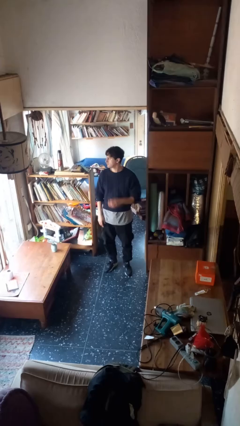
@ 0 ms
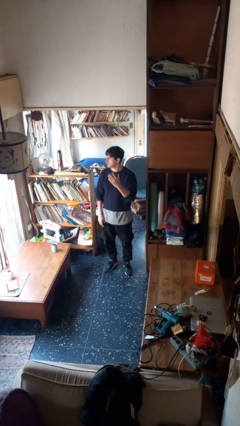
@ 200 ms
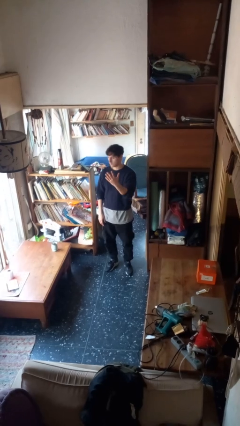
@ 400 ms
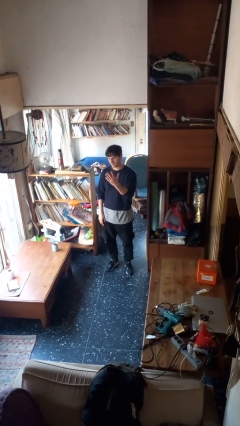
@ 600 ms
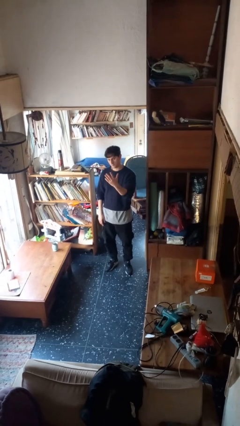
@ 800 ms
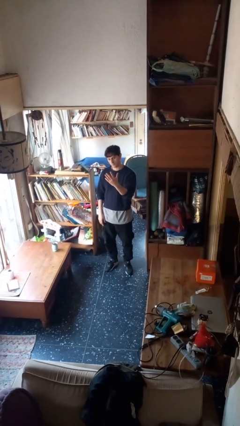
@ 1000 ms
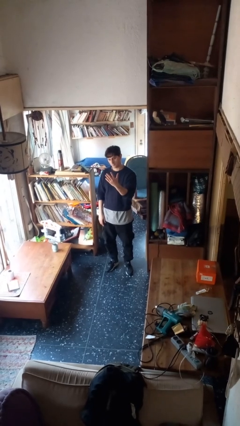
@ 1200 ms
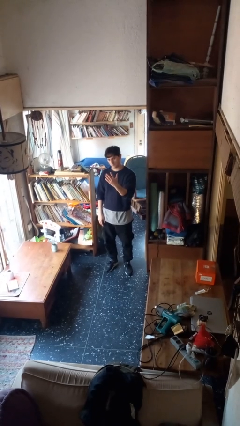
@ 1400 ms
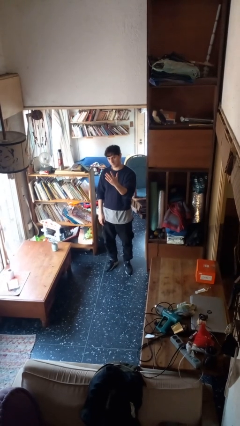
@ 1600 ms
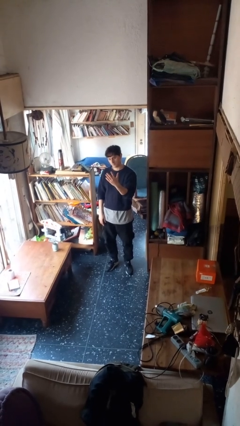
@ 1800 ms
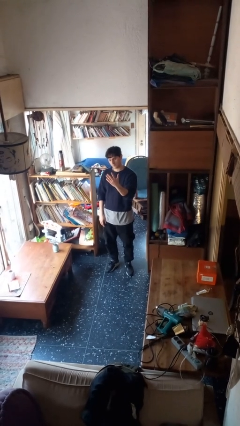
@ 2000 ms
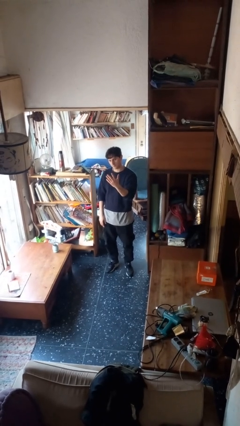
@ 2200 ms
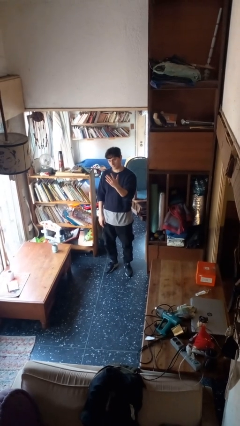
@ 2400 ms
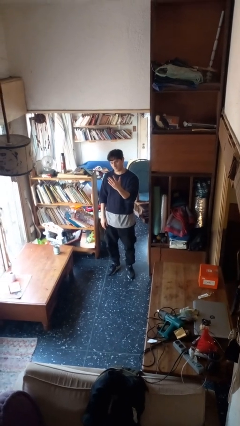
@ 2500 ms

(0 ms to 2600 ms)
person gestures number five

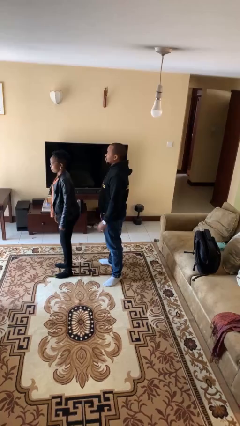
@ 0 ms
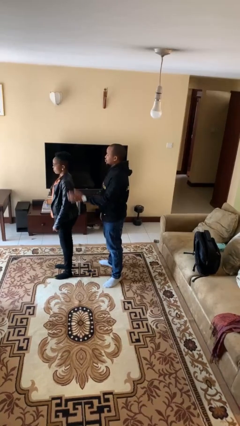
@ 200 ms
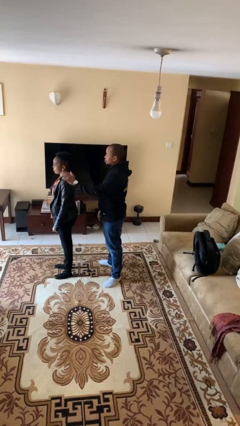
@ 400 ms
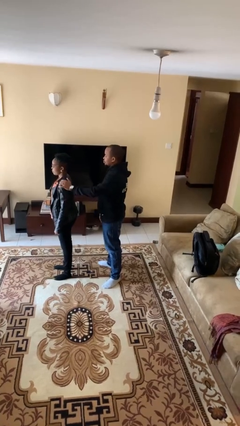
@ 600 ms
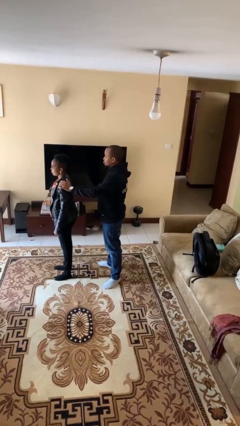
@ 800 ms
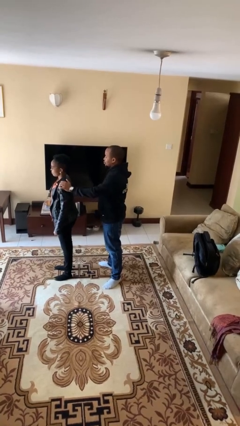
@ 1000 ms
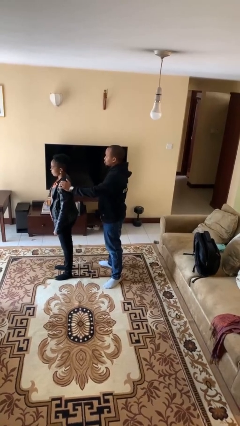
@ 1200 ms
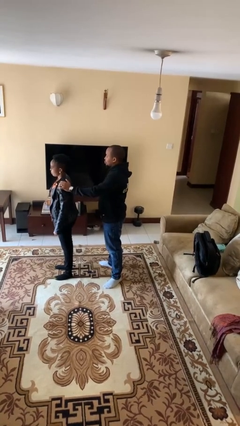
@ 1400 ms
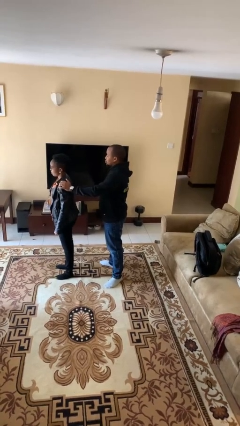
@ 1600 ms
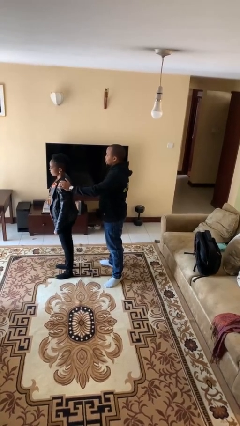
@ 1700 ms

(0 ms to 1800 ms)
person grabs person by shoulder

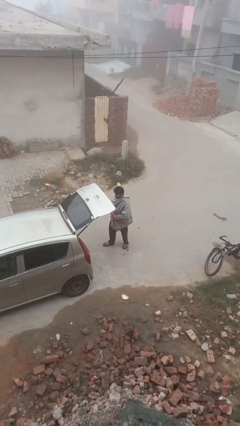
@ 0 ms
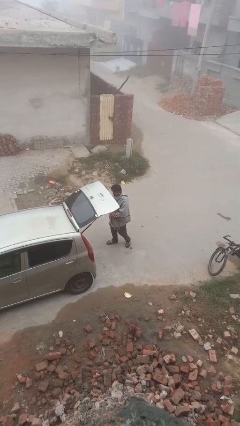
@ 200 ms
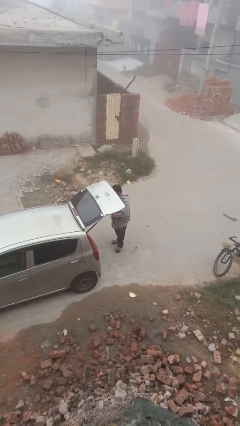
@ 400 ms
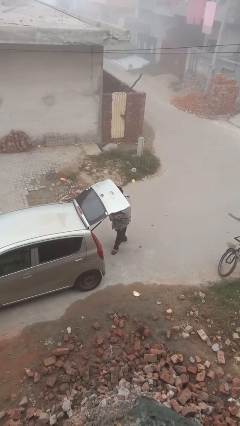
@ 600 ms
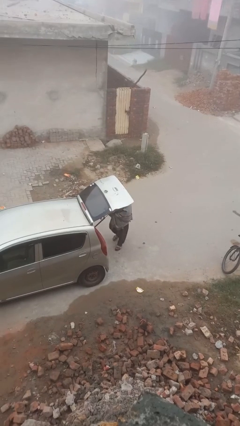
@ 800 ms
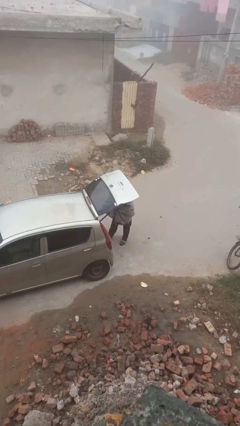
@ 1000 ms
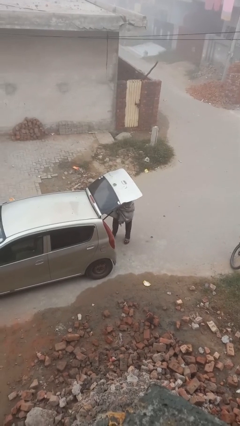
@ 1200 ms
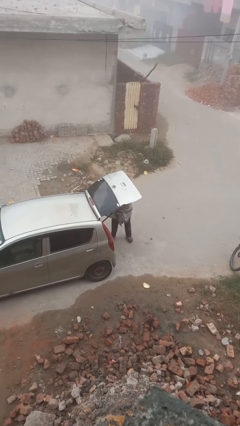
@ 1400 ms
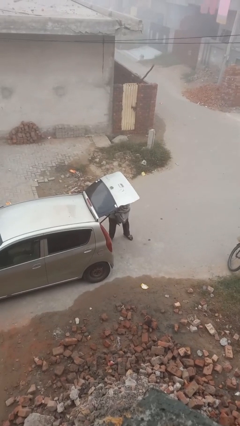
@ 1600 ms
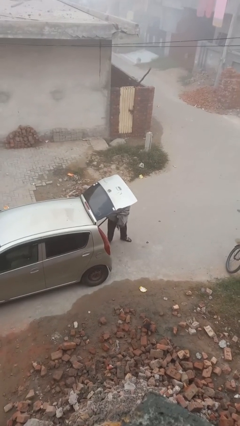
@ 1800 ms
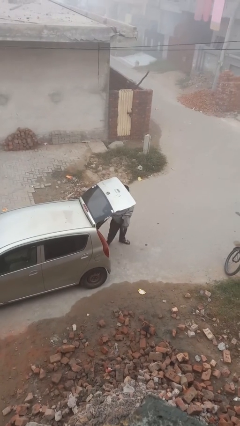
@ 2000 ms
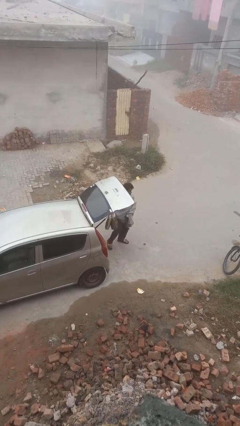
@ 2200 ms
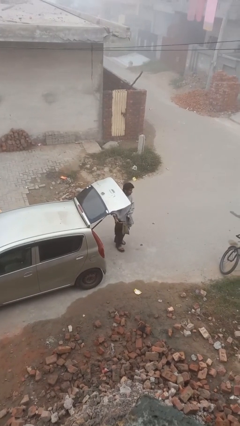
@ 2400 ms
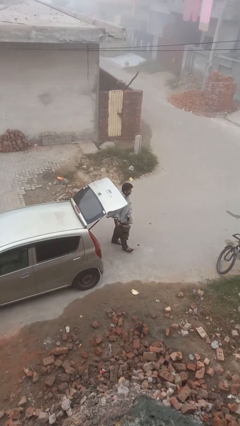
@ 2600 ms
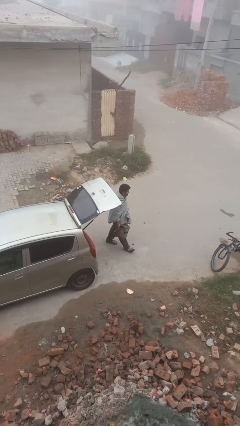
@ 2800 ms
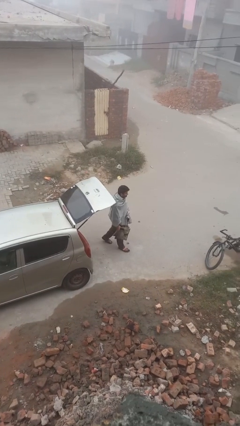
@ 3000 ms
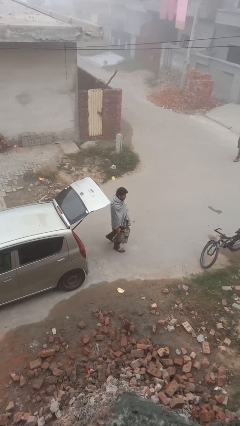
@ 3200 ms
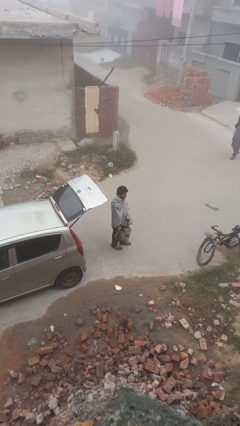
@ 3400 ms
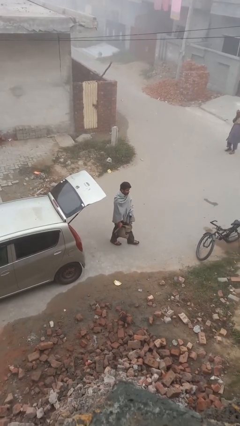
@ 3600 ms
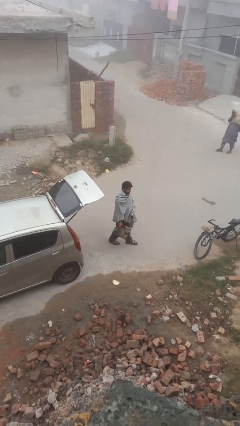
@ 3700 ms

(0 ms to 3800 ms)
person unloads car

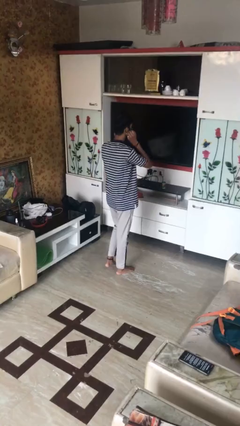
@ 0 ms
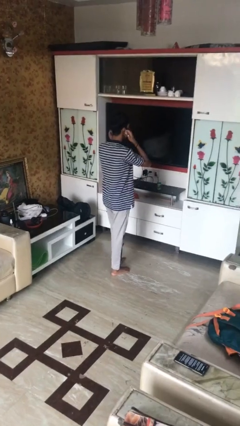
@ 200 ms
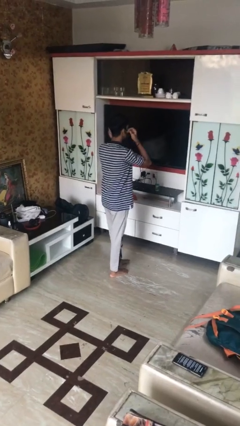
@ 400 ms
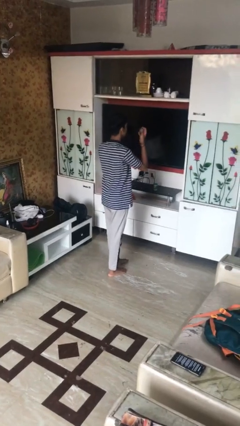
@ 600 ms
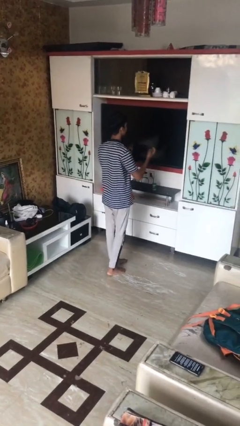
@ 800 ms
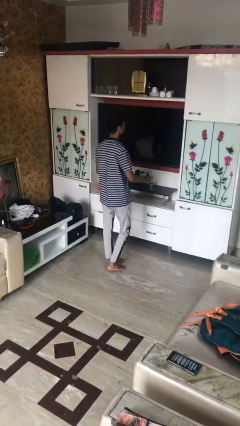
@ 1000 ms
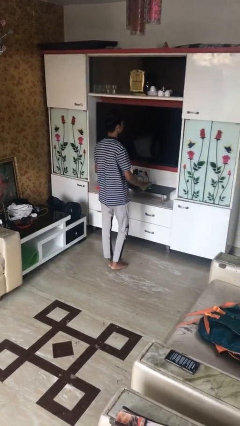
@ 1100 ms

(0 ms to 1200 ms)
person takes off facemask

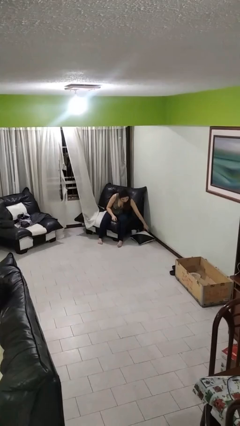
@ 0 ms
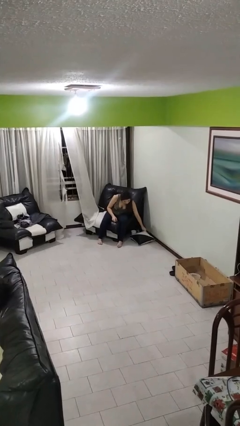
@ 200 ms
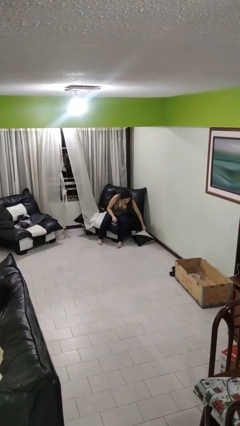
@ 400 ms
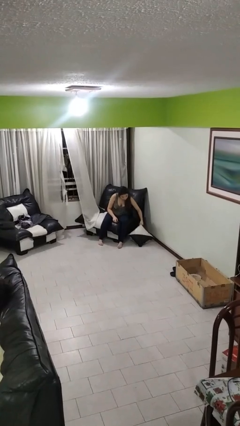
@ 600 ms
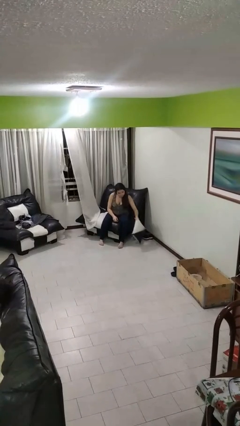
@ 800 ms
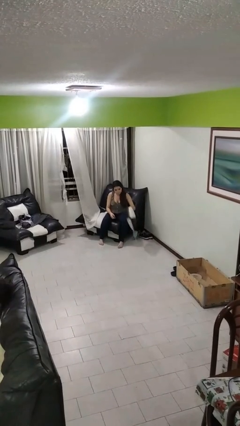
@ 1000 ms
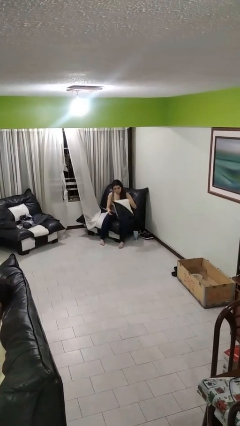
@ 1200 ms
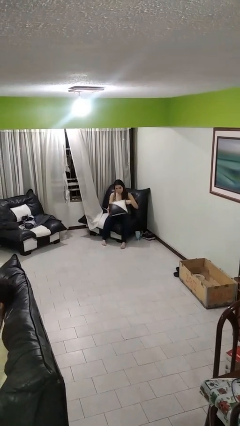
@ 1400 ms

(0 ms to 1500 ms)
person picks up object from floor

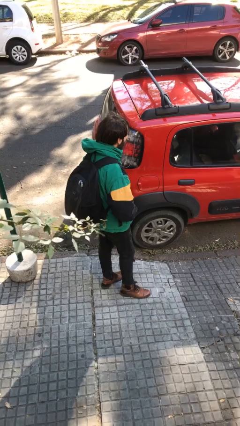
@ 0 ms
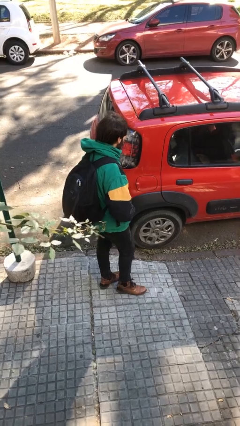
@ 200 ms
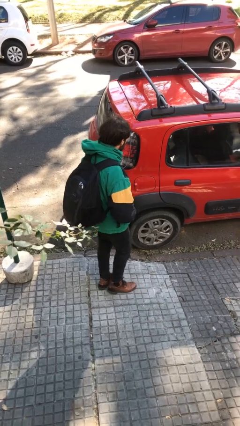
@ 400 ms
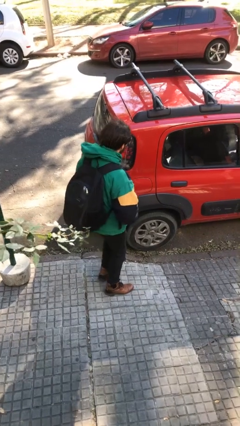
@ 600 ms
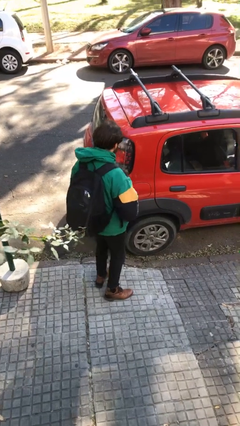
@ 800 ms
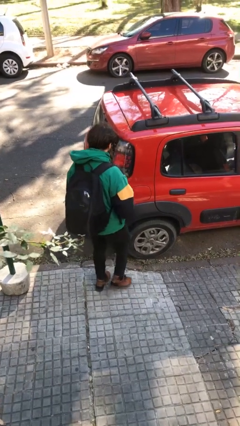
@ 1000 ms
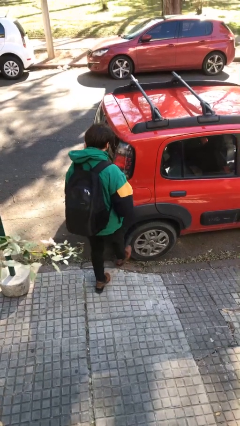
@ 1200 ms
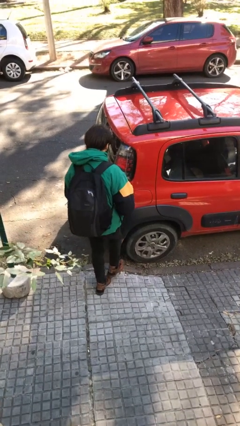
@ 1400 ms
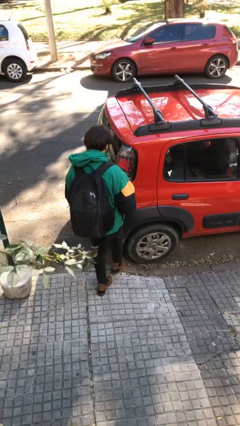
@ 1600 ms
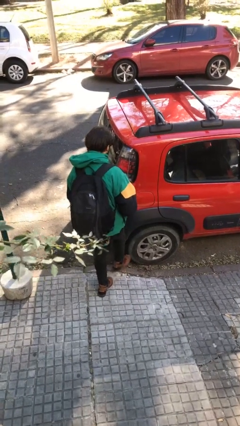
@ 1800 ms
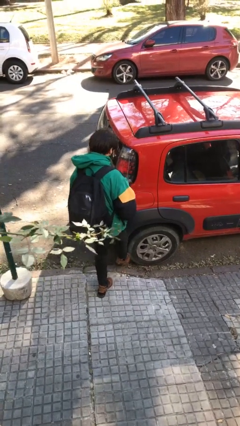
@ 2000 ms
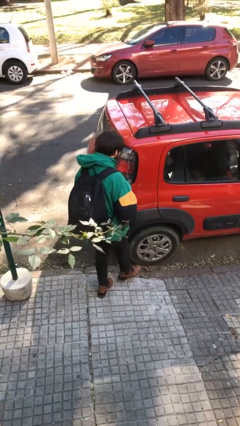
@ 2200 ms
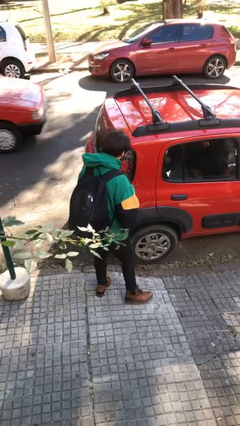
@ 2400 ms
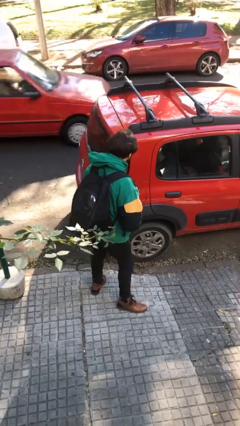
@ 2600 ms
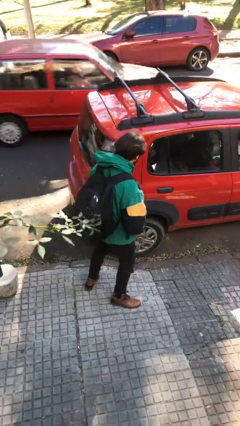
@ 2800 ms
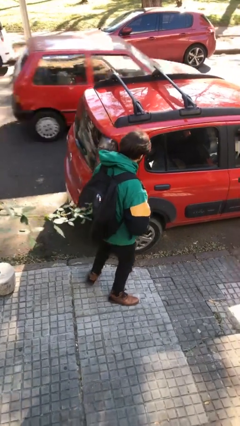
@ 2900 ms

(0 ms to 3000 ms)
person kicks car tires

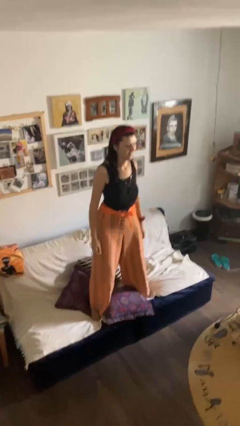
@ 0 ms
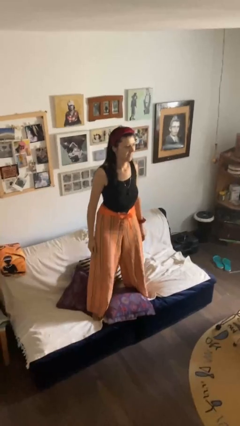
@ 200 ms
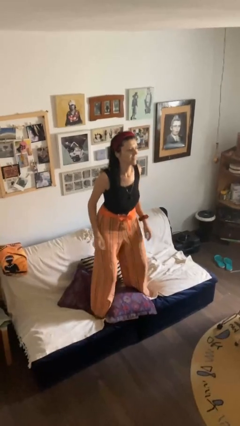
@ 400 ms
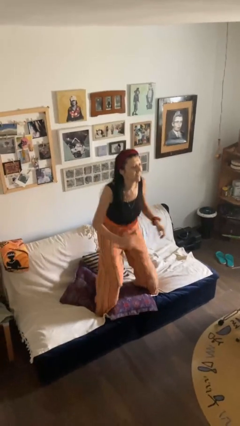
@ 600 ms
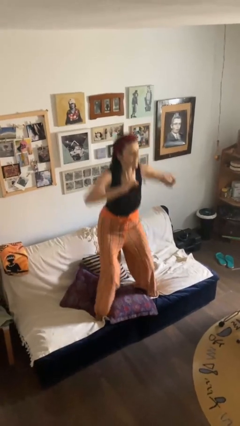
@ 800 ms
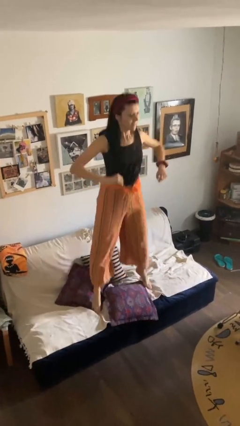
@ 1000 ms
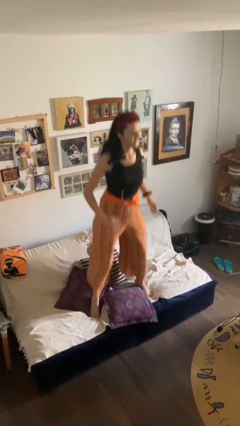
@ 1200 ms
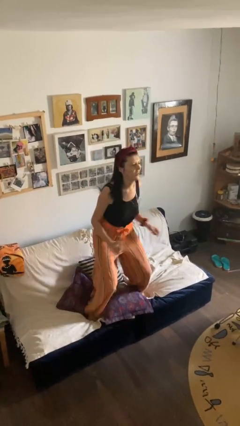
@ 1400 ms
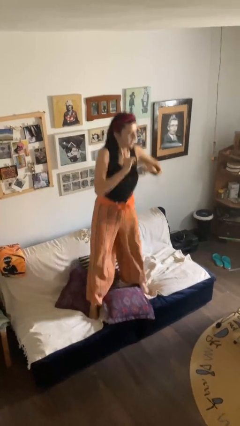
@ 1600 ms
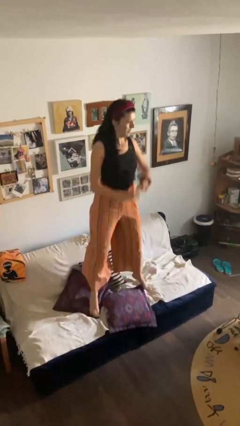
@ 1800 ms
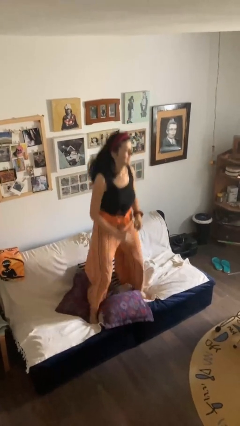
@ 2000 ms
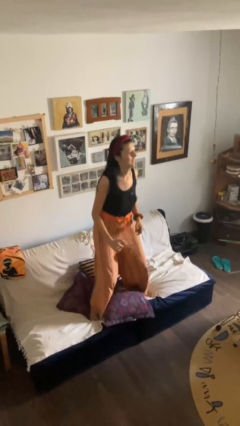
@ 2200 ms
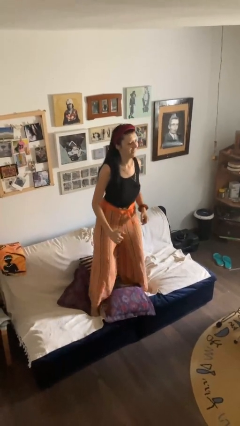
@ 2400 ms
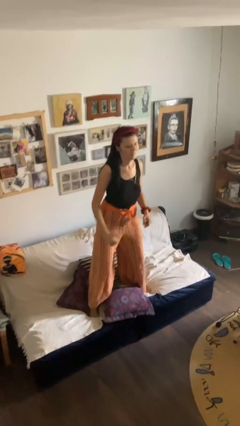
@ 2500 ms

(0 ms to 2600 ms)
person jumps on couch

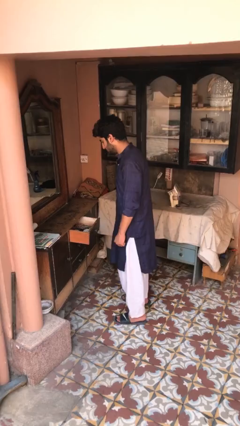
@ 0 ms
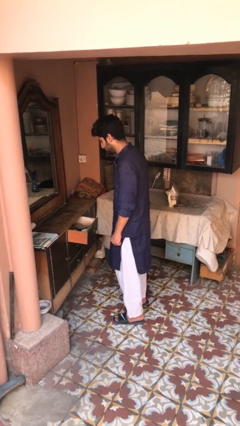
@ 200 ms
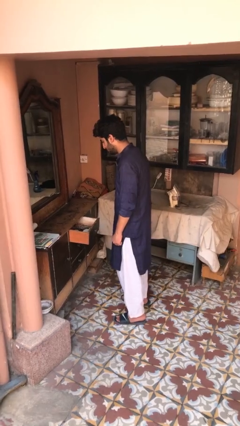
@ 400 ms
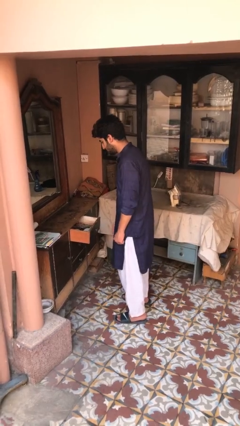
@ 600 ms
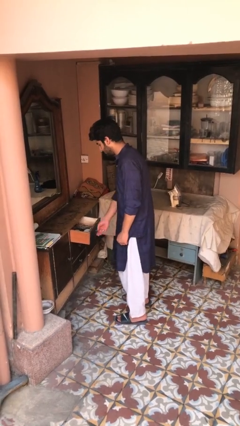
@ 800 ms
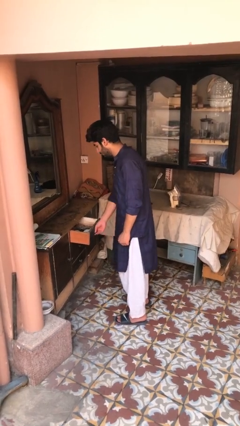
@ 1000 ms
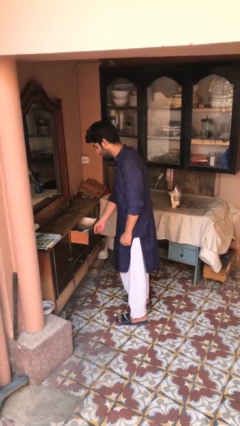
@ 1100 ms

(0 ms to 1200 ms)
person closes dresser drawer
